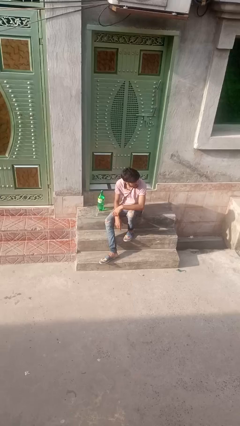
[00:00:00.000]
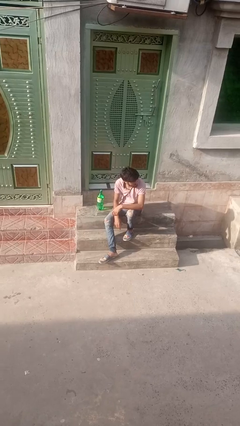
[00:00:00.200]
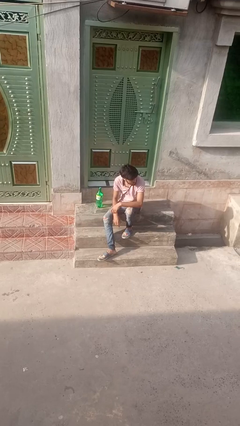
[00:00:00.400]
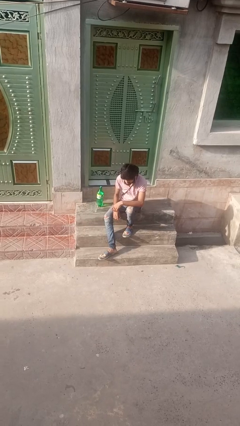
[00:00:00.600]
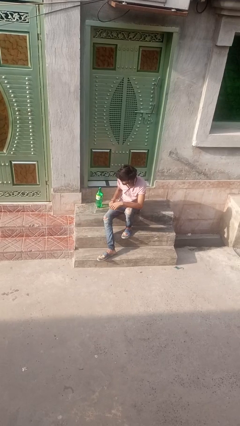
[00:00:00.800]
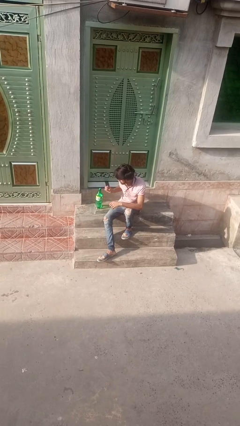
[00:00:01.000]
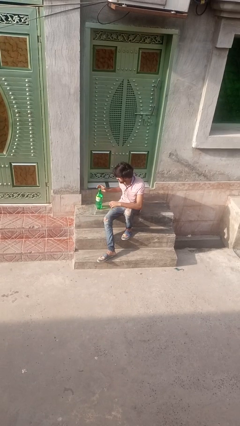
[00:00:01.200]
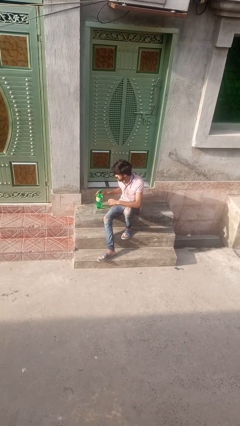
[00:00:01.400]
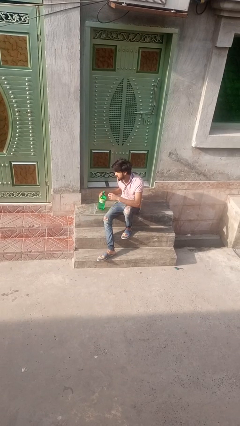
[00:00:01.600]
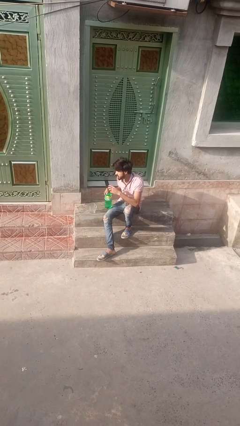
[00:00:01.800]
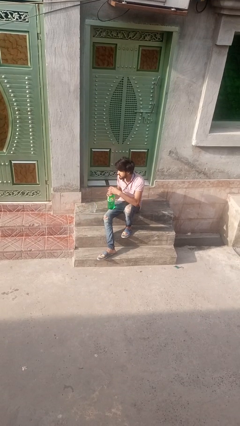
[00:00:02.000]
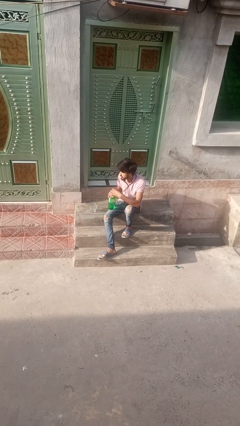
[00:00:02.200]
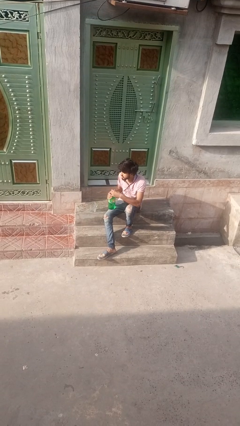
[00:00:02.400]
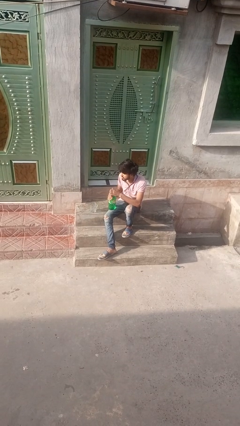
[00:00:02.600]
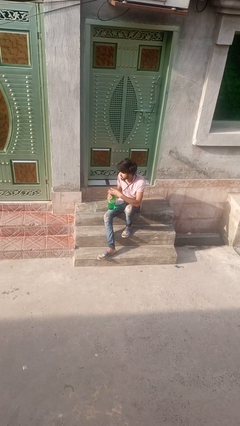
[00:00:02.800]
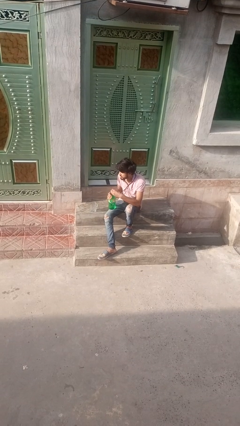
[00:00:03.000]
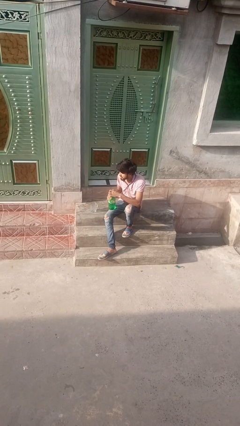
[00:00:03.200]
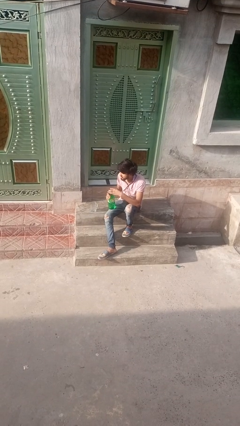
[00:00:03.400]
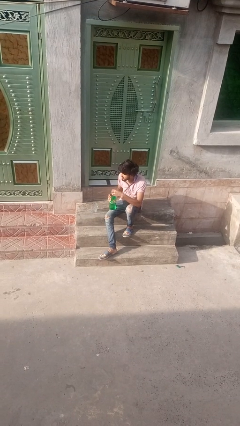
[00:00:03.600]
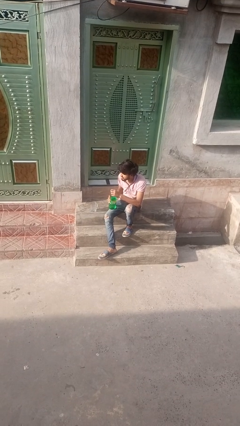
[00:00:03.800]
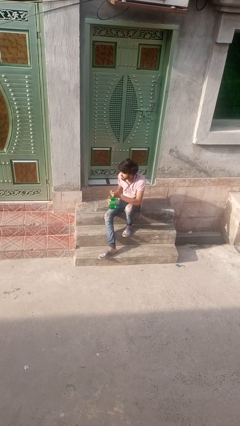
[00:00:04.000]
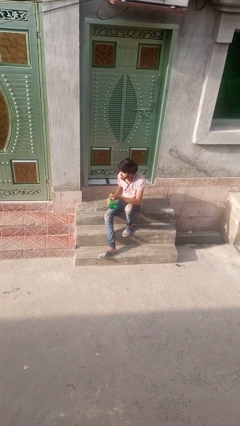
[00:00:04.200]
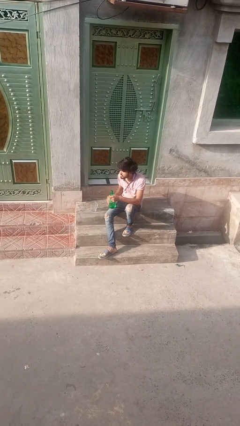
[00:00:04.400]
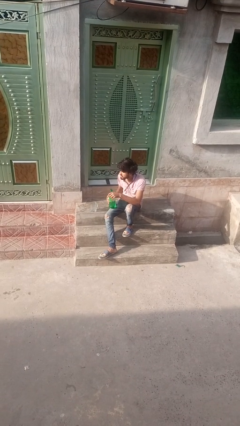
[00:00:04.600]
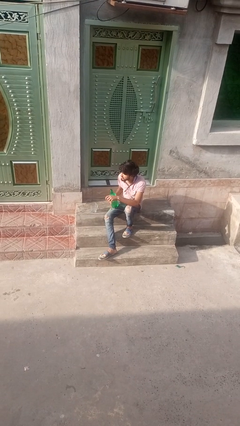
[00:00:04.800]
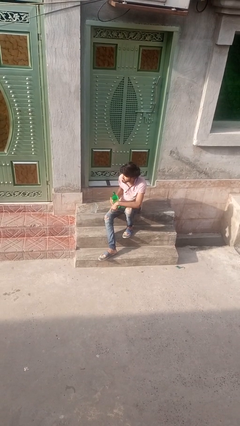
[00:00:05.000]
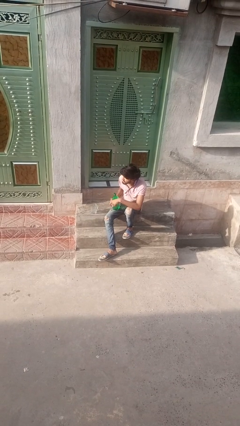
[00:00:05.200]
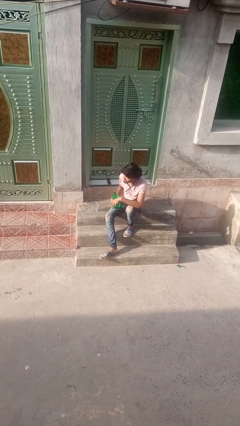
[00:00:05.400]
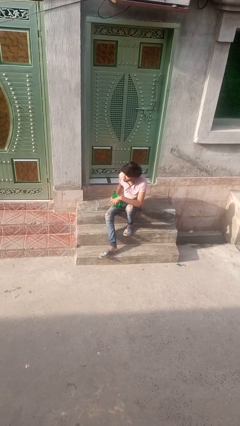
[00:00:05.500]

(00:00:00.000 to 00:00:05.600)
person unscrews lid from bottle

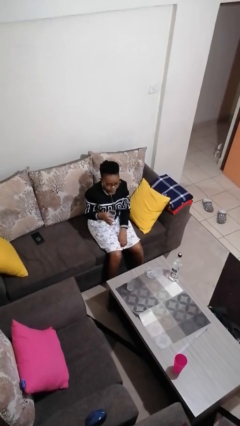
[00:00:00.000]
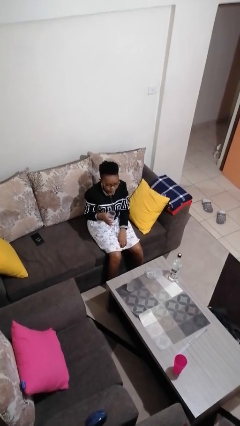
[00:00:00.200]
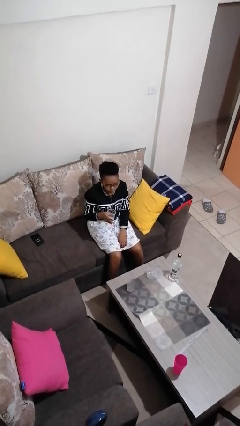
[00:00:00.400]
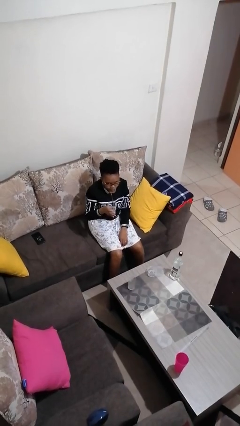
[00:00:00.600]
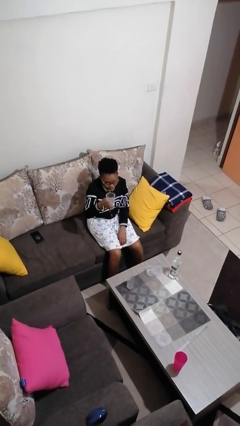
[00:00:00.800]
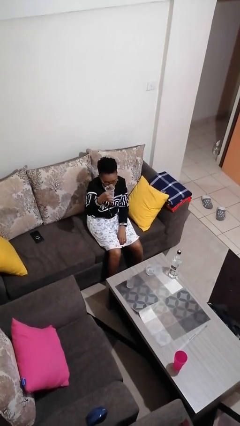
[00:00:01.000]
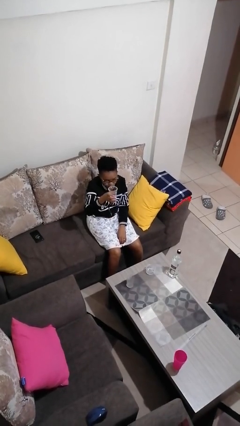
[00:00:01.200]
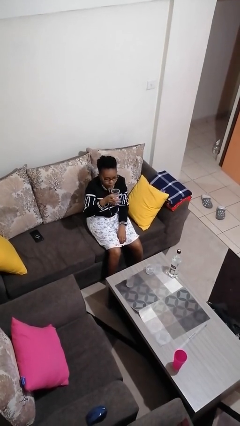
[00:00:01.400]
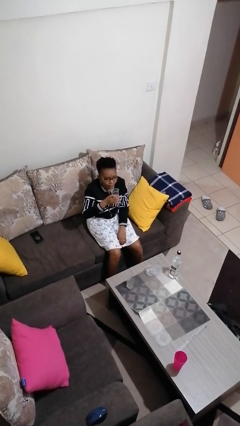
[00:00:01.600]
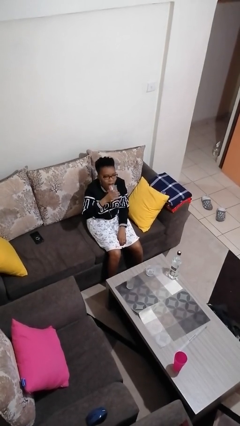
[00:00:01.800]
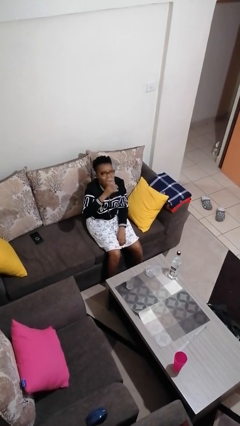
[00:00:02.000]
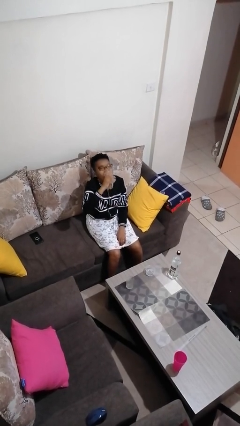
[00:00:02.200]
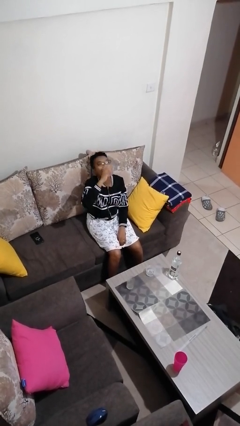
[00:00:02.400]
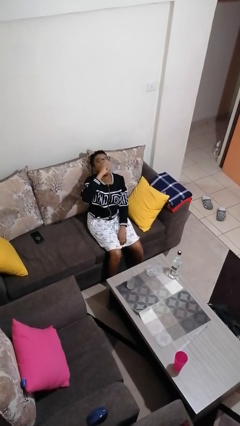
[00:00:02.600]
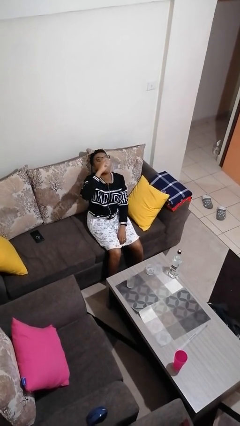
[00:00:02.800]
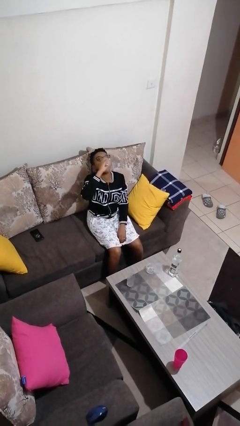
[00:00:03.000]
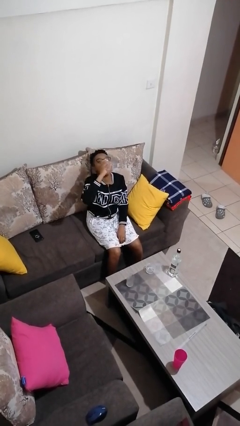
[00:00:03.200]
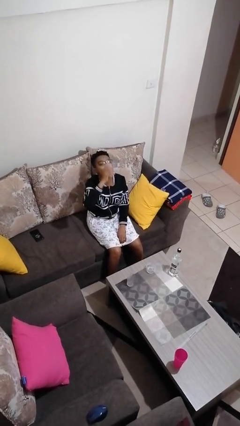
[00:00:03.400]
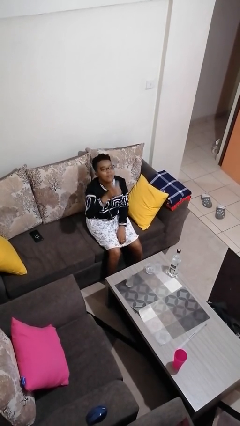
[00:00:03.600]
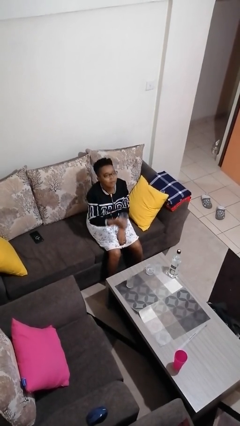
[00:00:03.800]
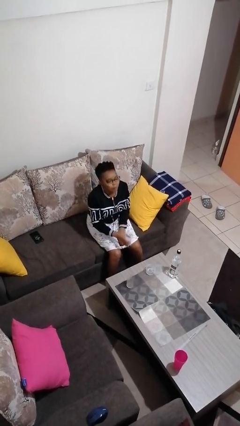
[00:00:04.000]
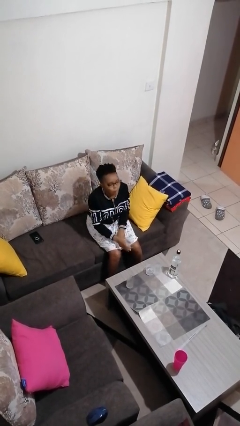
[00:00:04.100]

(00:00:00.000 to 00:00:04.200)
person drinks from shotglass

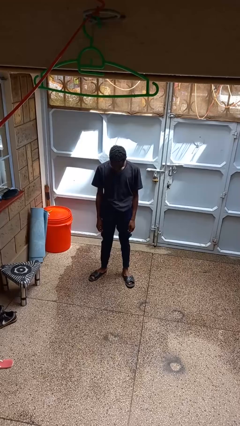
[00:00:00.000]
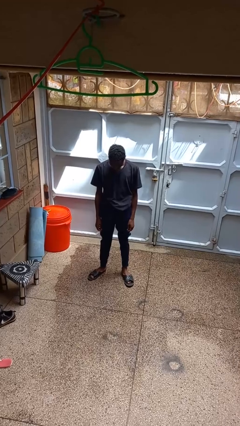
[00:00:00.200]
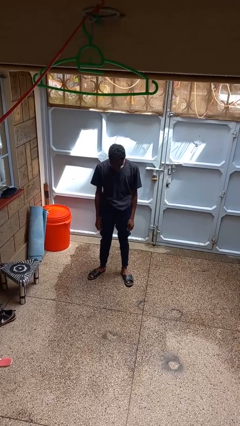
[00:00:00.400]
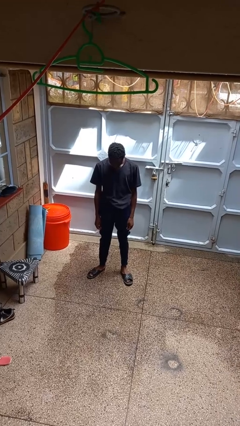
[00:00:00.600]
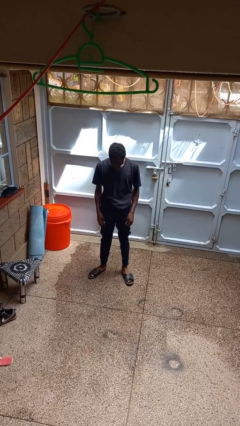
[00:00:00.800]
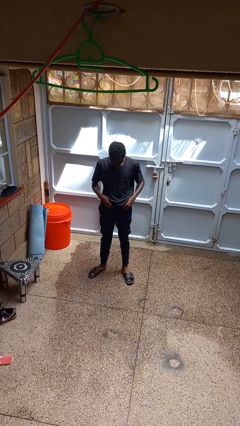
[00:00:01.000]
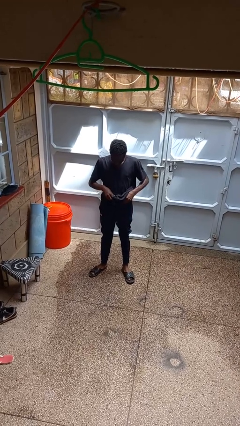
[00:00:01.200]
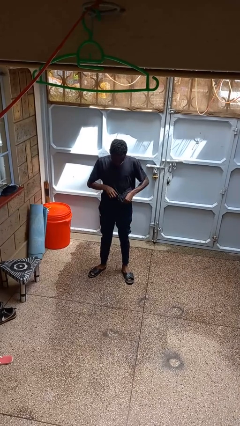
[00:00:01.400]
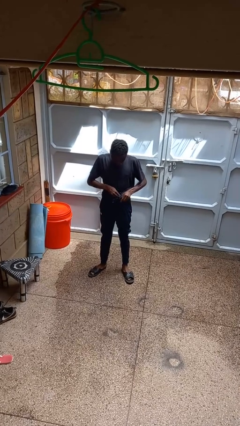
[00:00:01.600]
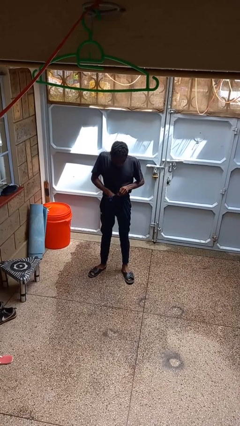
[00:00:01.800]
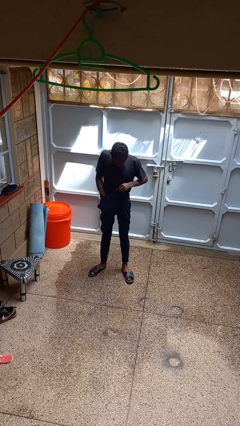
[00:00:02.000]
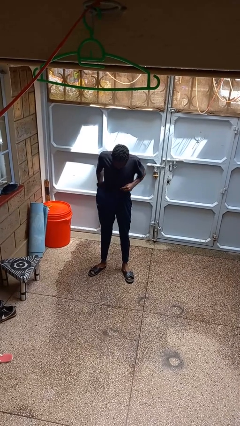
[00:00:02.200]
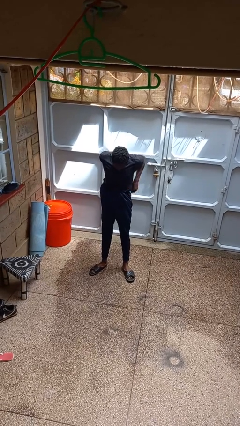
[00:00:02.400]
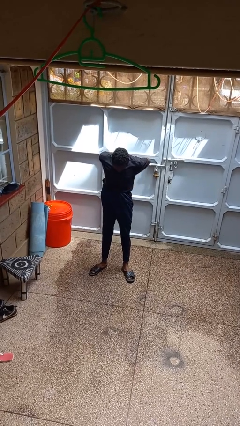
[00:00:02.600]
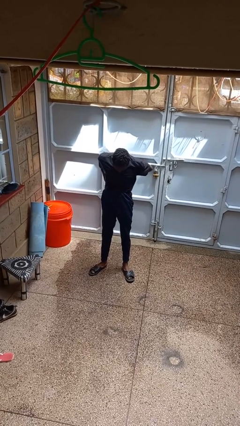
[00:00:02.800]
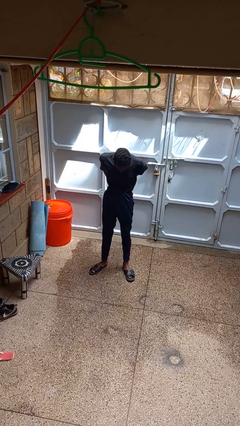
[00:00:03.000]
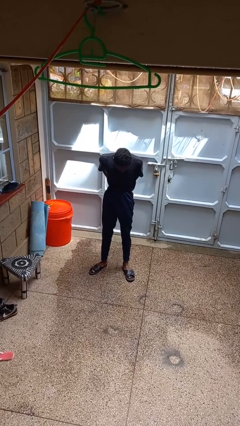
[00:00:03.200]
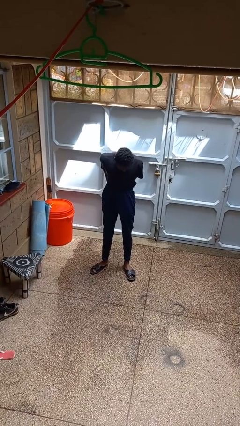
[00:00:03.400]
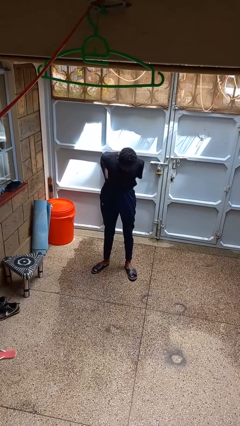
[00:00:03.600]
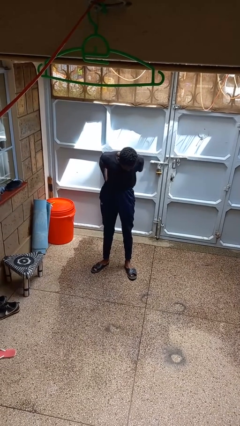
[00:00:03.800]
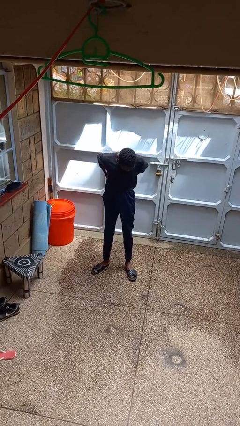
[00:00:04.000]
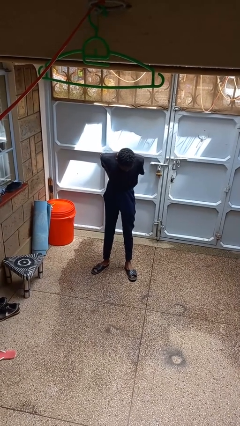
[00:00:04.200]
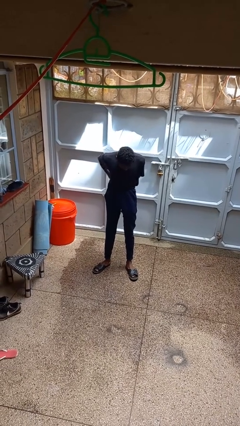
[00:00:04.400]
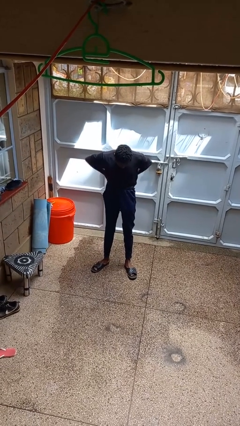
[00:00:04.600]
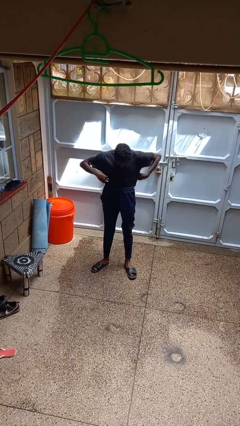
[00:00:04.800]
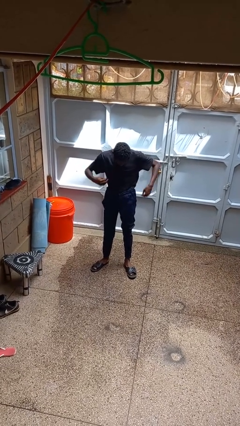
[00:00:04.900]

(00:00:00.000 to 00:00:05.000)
person tucks in shirt

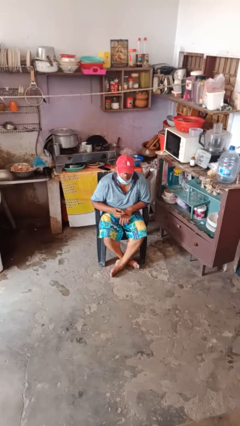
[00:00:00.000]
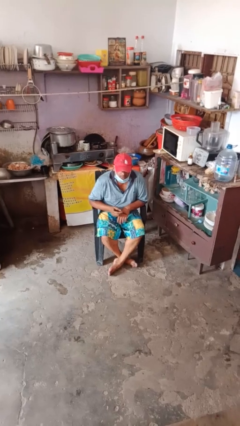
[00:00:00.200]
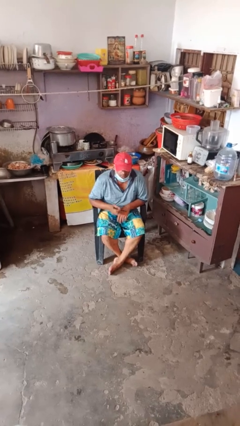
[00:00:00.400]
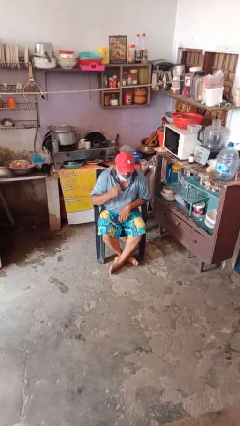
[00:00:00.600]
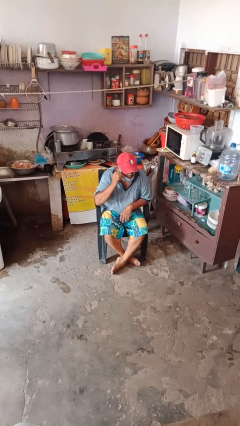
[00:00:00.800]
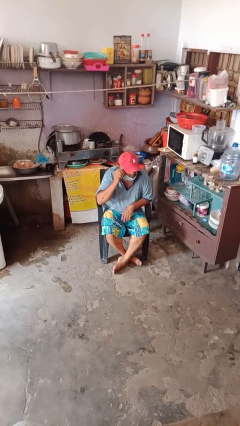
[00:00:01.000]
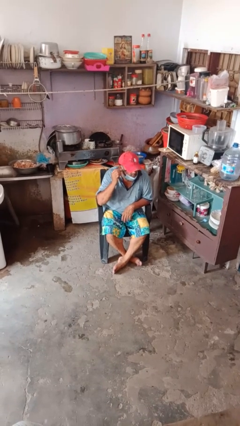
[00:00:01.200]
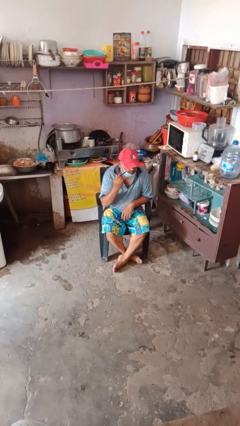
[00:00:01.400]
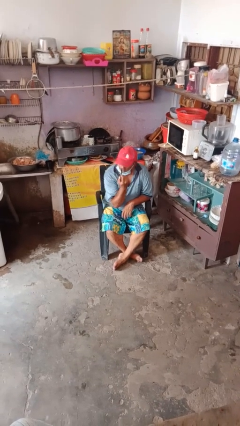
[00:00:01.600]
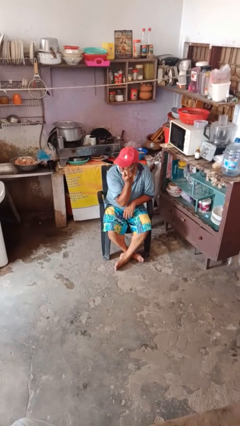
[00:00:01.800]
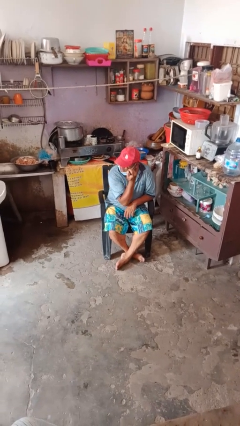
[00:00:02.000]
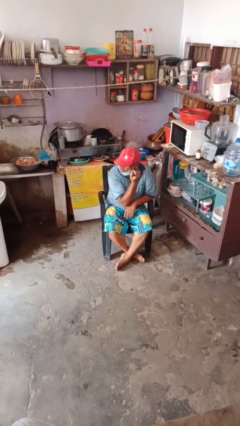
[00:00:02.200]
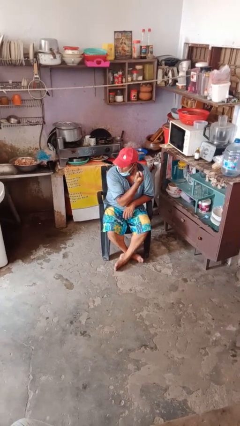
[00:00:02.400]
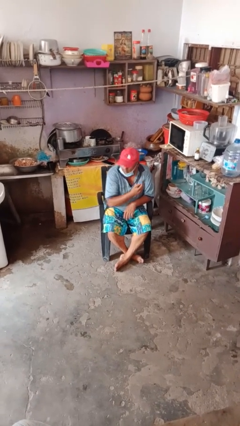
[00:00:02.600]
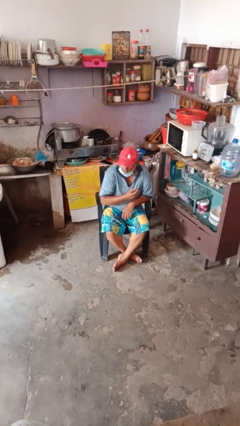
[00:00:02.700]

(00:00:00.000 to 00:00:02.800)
person applies eye makeup

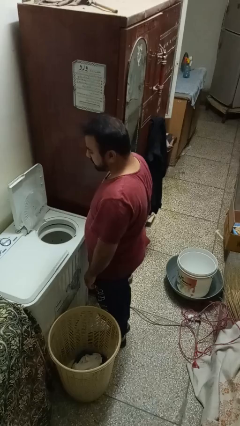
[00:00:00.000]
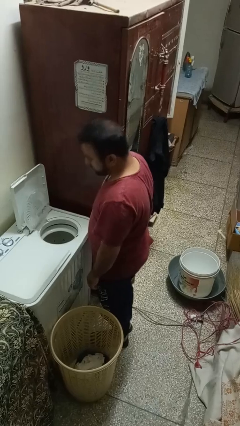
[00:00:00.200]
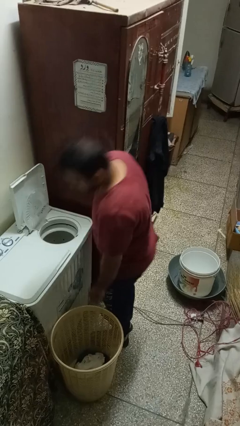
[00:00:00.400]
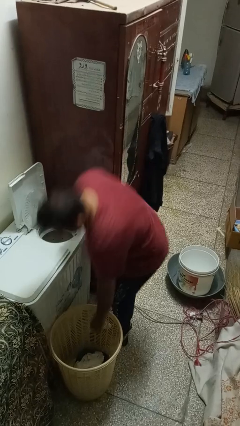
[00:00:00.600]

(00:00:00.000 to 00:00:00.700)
person loads dryer
